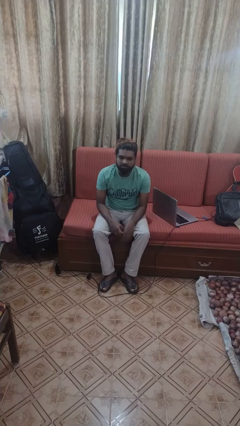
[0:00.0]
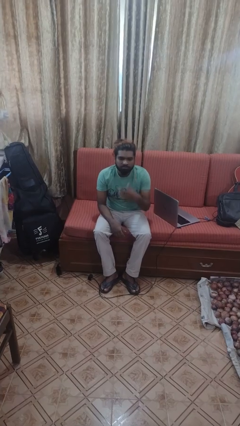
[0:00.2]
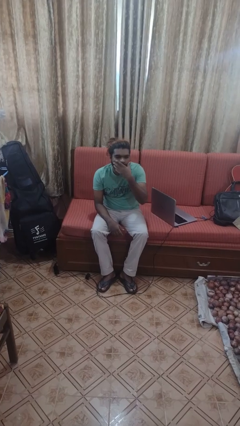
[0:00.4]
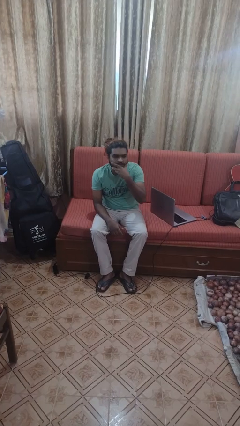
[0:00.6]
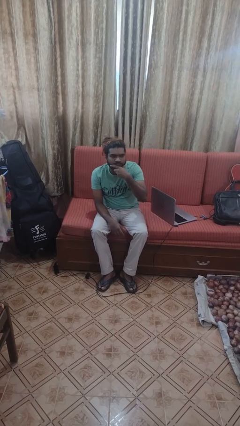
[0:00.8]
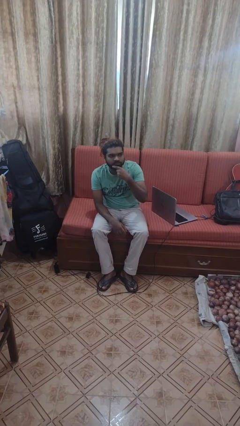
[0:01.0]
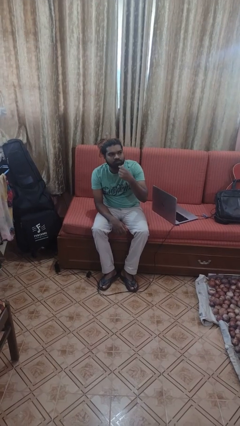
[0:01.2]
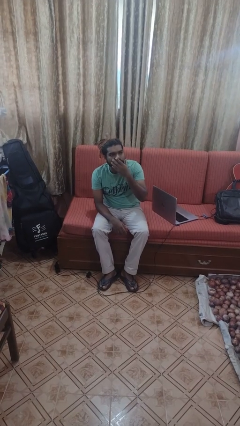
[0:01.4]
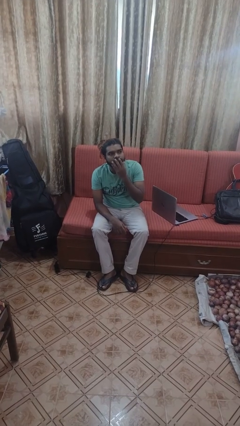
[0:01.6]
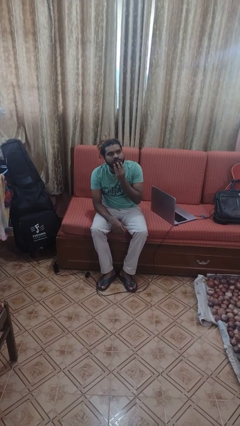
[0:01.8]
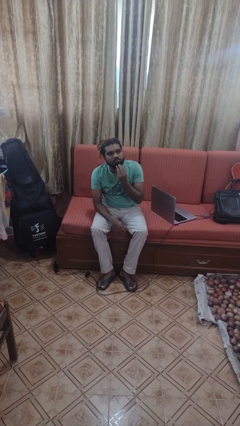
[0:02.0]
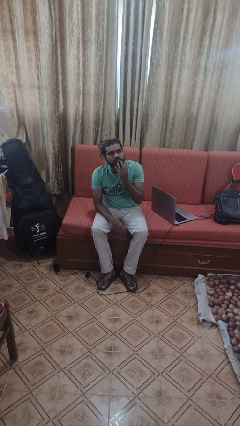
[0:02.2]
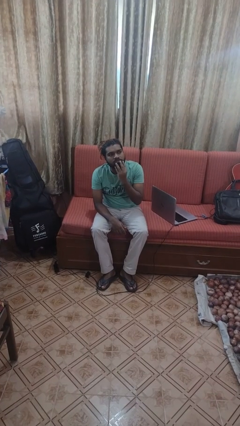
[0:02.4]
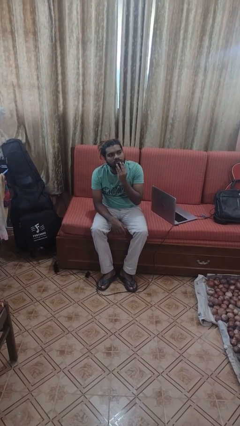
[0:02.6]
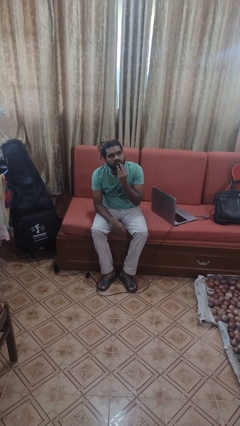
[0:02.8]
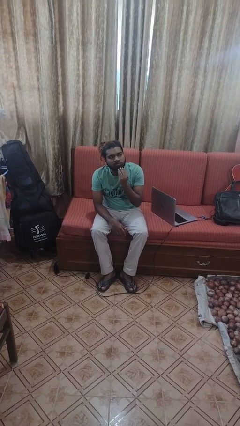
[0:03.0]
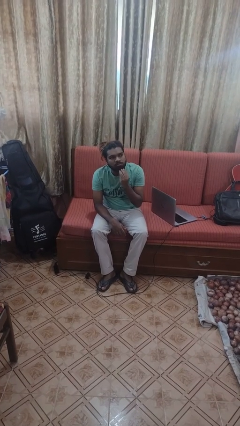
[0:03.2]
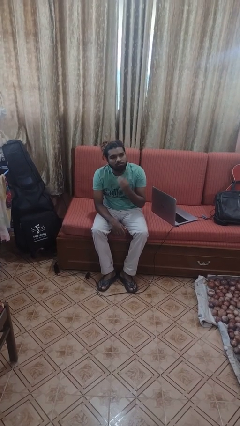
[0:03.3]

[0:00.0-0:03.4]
person strokes chin

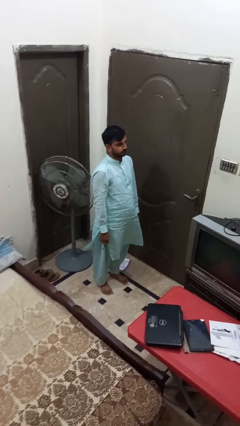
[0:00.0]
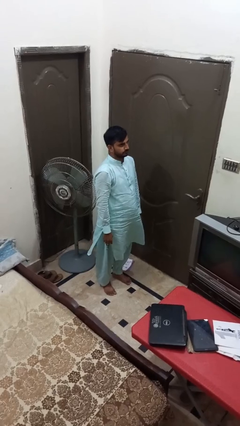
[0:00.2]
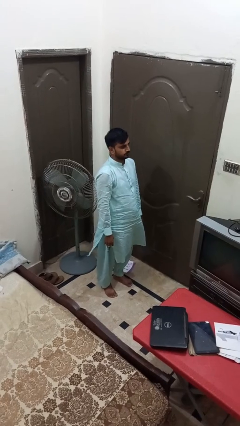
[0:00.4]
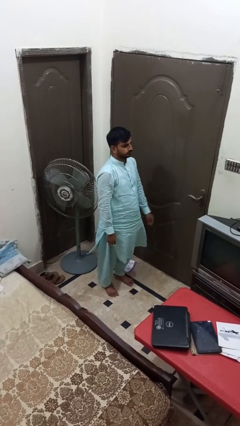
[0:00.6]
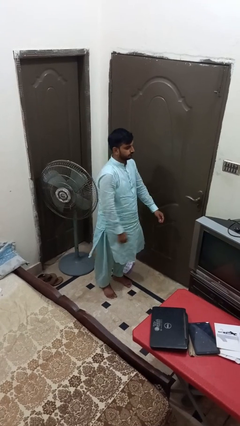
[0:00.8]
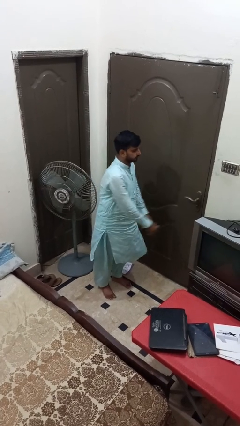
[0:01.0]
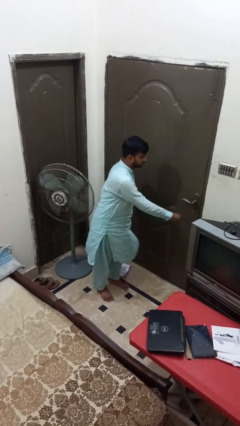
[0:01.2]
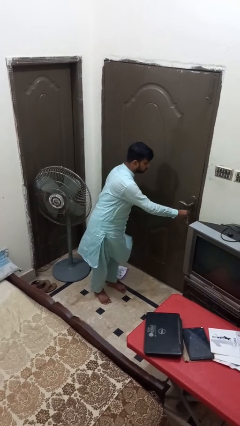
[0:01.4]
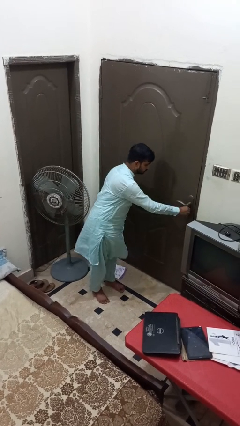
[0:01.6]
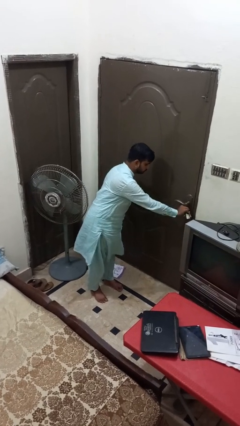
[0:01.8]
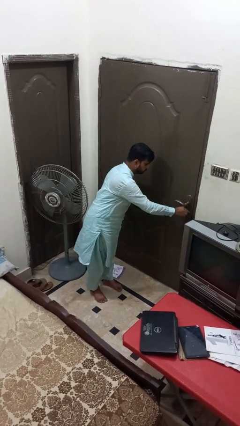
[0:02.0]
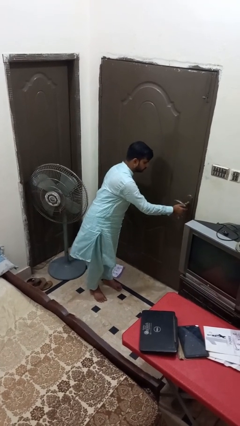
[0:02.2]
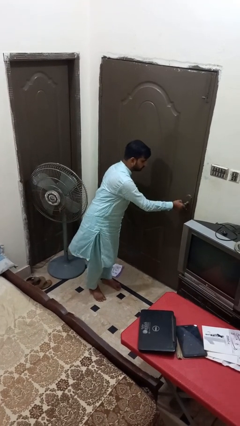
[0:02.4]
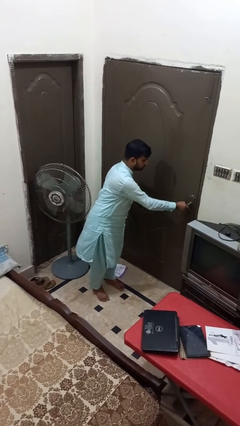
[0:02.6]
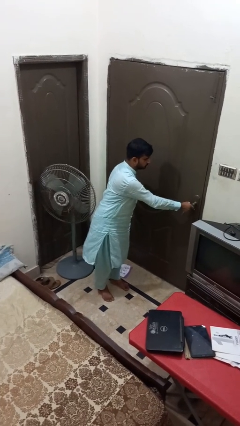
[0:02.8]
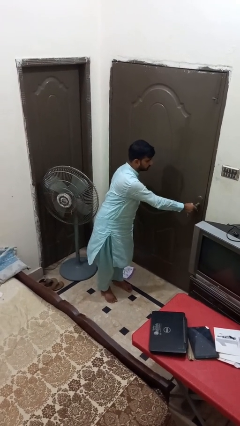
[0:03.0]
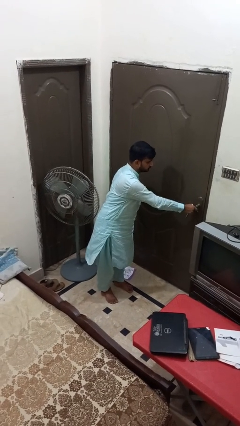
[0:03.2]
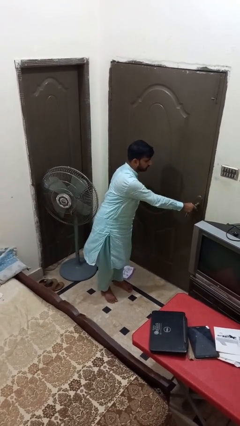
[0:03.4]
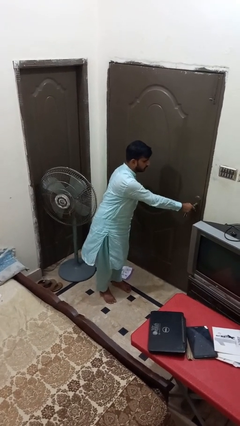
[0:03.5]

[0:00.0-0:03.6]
person unlocks door with keys

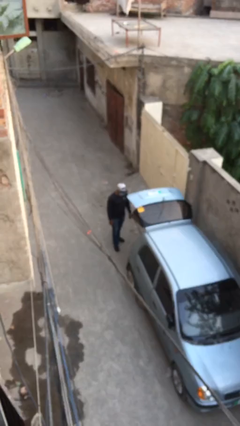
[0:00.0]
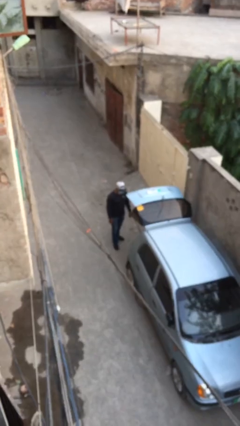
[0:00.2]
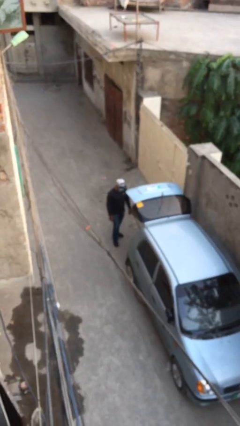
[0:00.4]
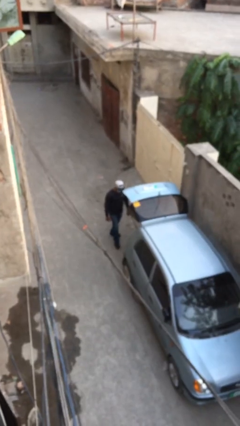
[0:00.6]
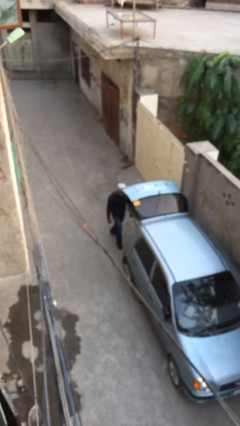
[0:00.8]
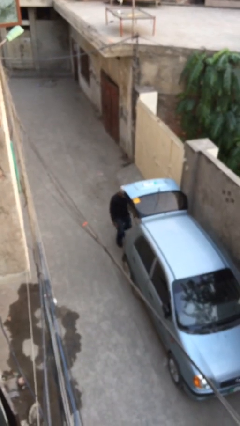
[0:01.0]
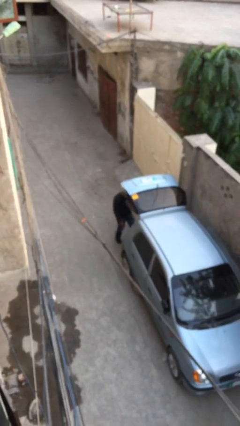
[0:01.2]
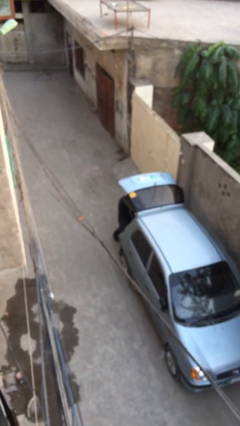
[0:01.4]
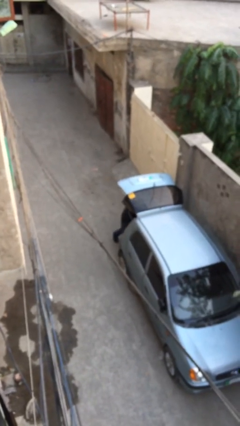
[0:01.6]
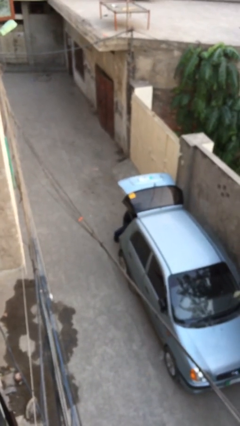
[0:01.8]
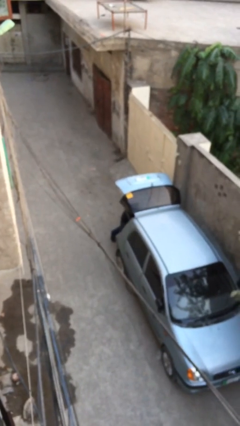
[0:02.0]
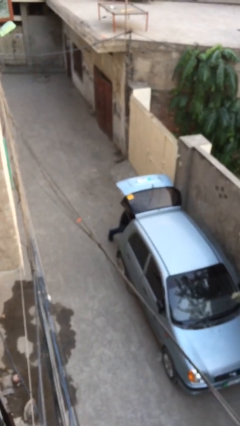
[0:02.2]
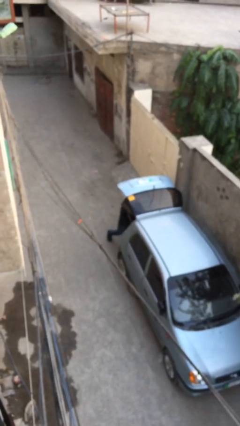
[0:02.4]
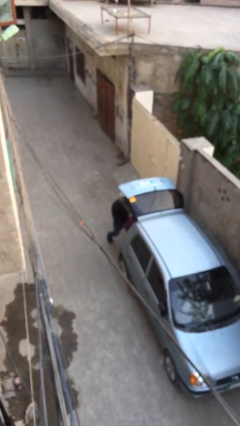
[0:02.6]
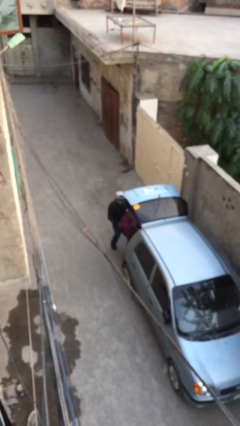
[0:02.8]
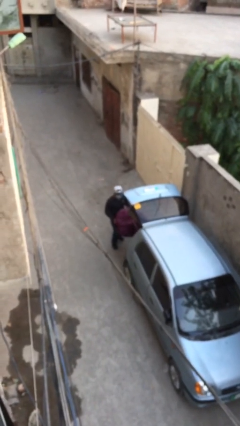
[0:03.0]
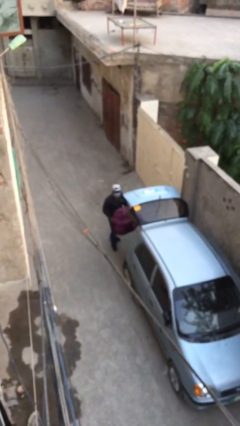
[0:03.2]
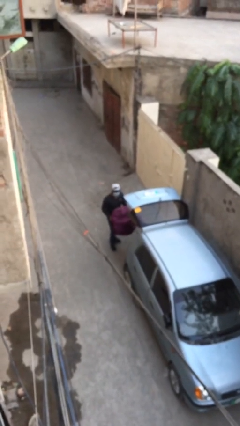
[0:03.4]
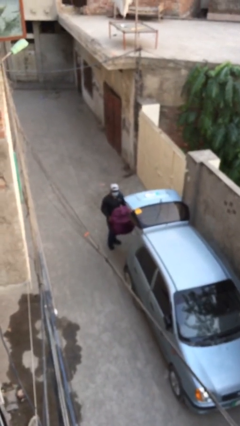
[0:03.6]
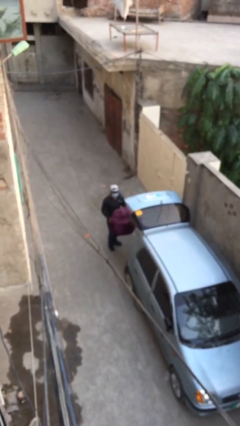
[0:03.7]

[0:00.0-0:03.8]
person unloads car

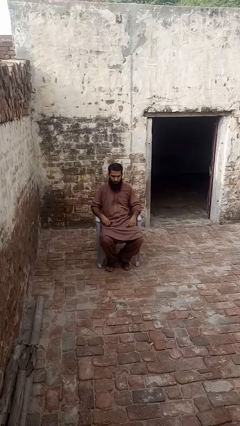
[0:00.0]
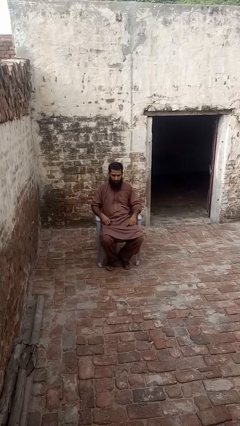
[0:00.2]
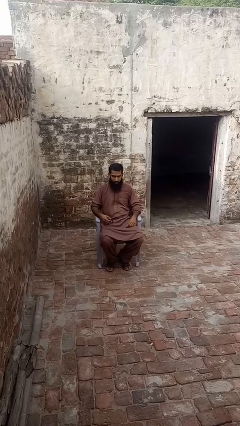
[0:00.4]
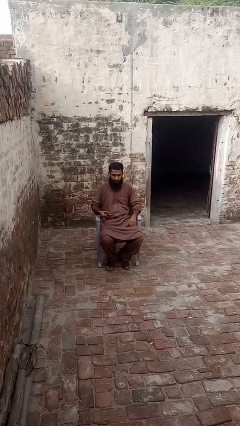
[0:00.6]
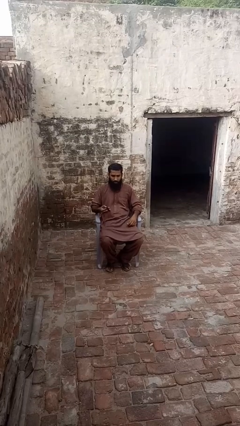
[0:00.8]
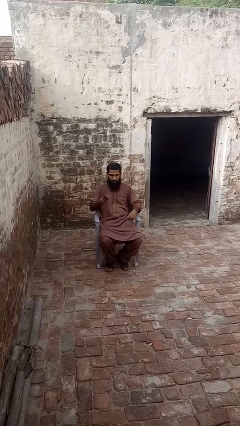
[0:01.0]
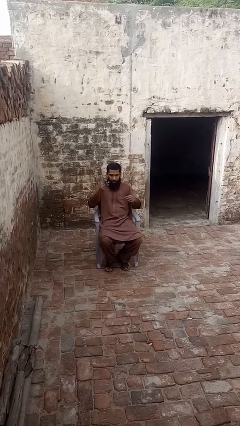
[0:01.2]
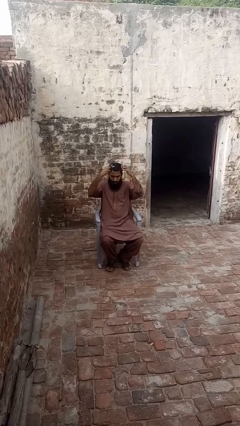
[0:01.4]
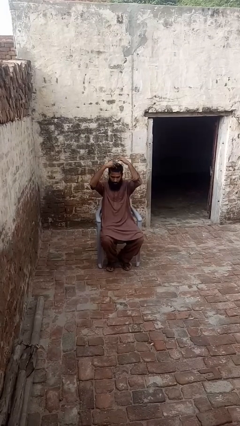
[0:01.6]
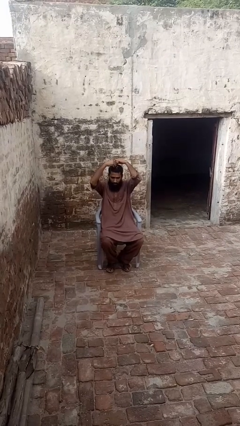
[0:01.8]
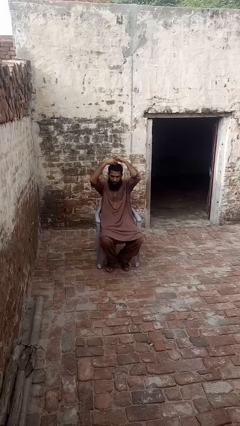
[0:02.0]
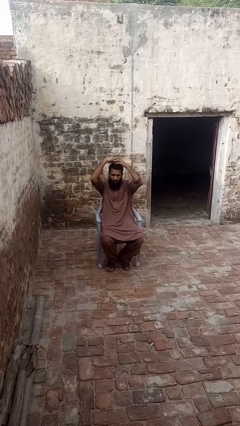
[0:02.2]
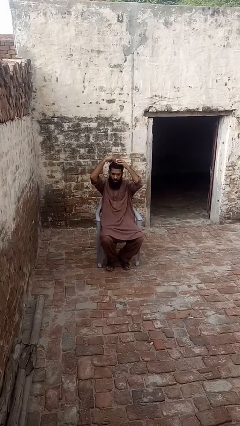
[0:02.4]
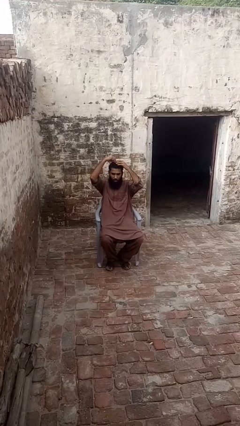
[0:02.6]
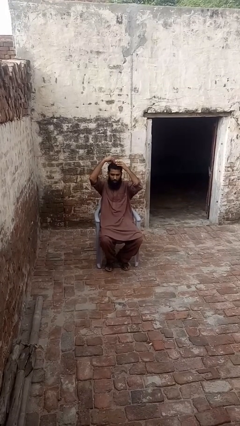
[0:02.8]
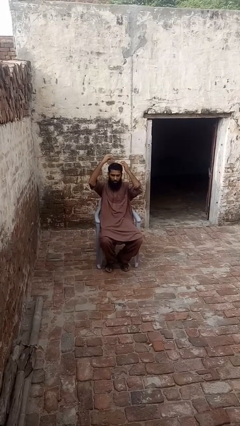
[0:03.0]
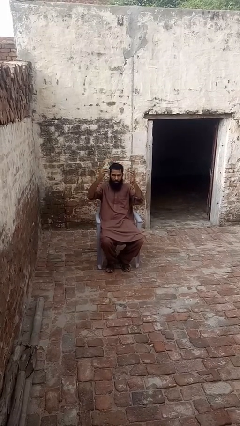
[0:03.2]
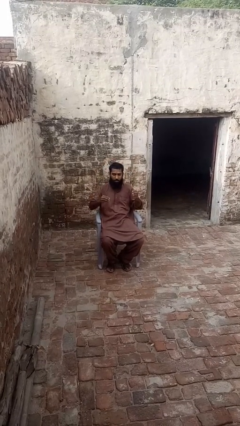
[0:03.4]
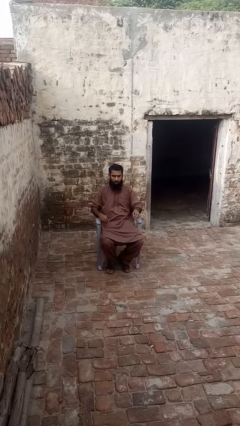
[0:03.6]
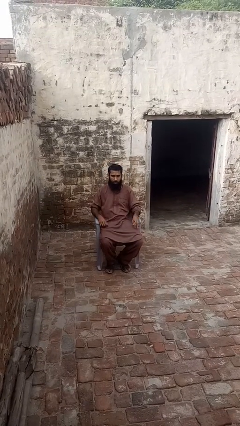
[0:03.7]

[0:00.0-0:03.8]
person puts hair in ponytail

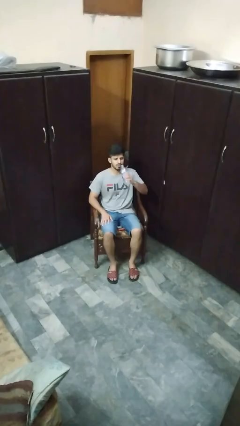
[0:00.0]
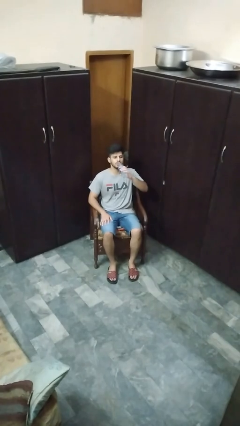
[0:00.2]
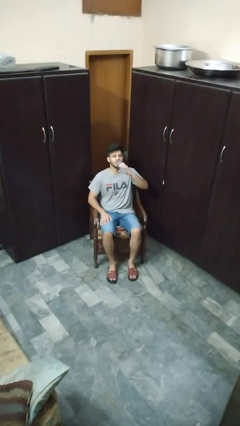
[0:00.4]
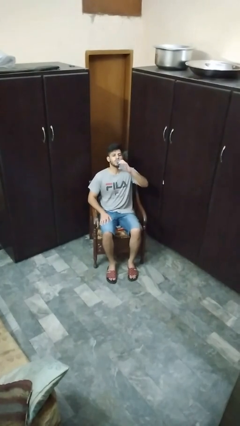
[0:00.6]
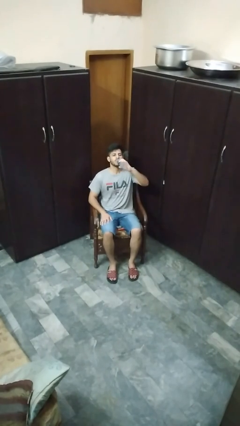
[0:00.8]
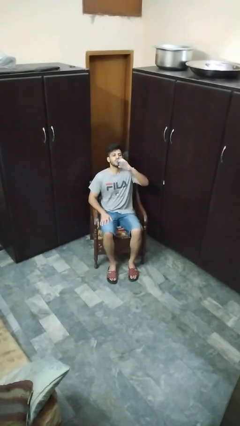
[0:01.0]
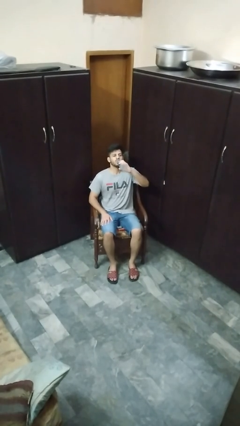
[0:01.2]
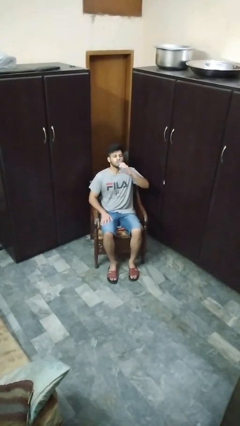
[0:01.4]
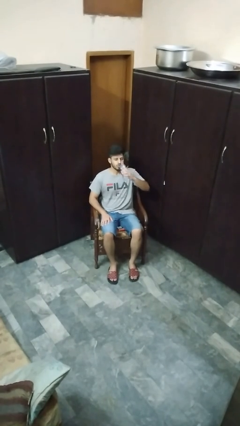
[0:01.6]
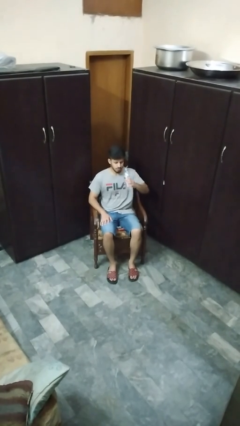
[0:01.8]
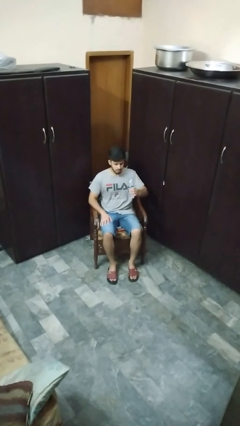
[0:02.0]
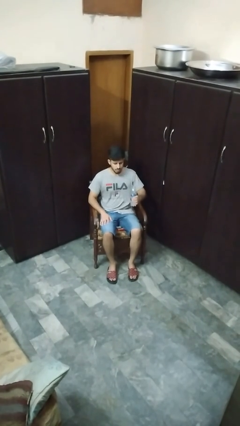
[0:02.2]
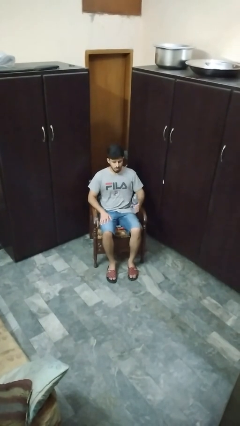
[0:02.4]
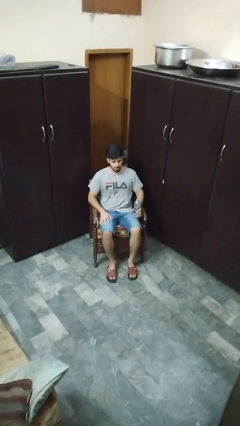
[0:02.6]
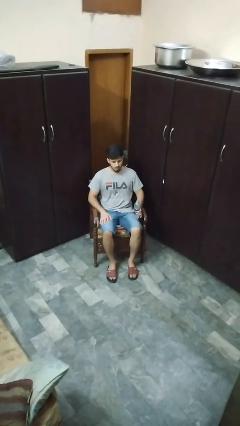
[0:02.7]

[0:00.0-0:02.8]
person drinks from bottle
